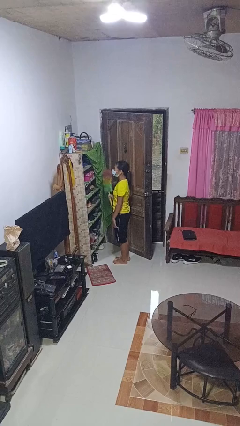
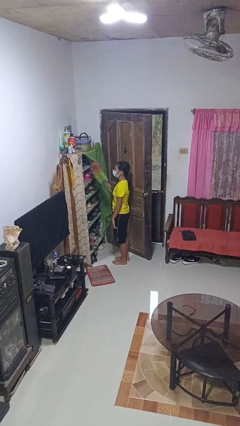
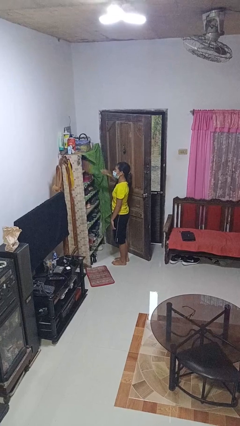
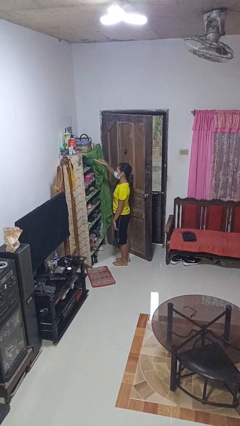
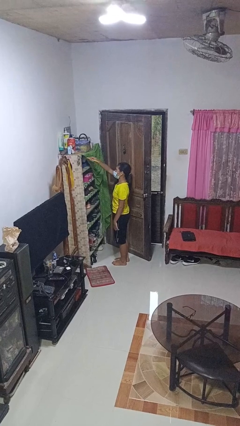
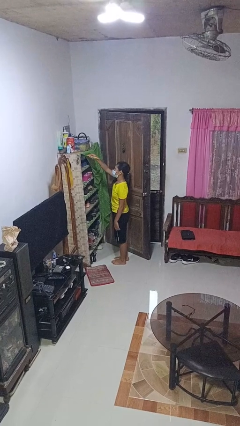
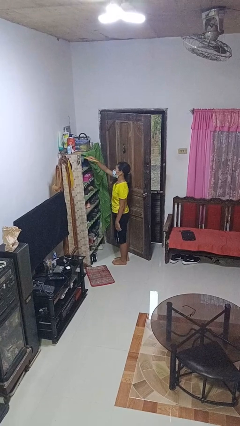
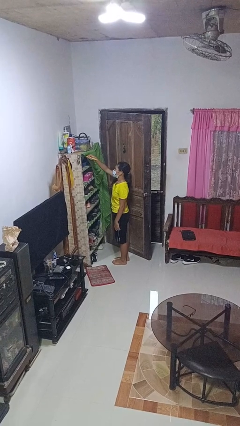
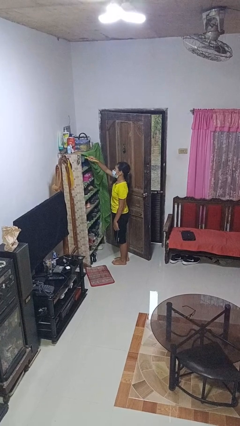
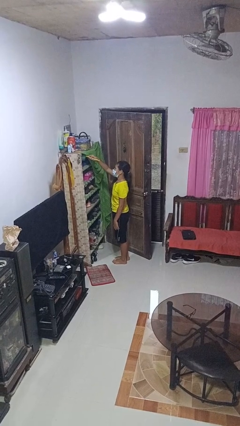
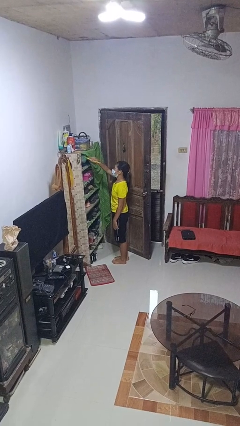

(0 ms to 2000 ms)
person dusts furniture

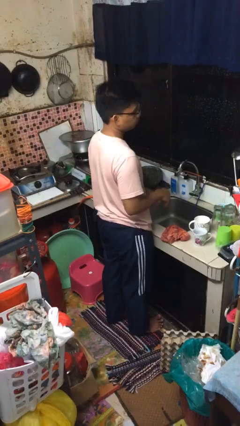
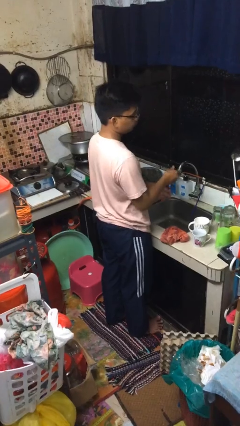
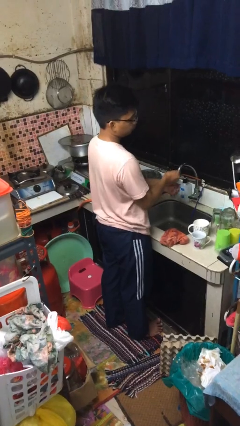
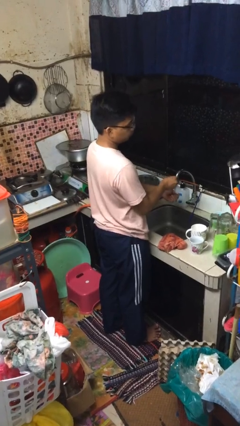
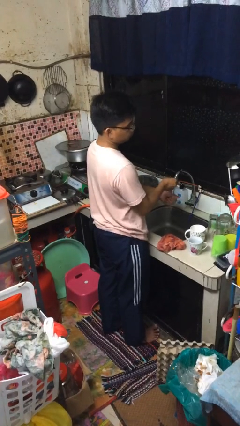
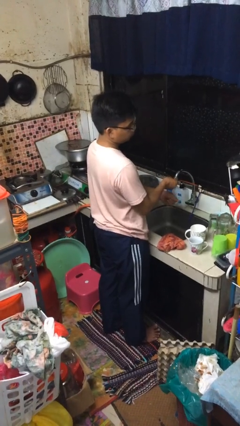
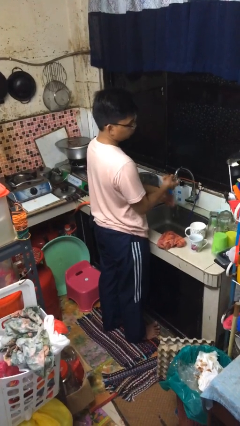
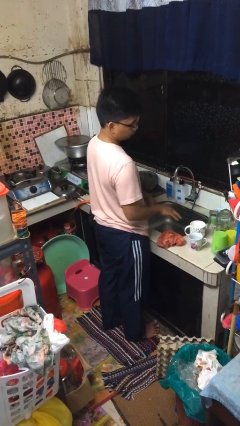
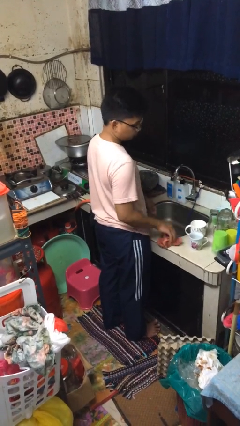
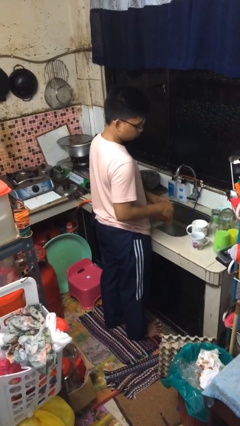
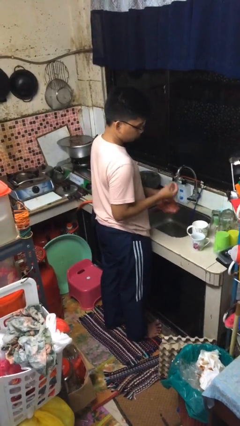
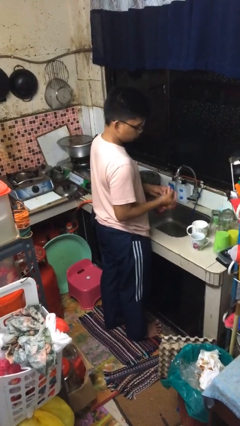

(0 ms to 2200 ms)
person washes hands

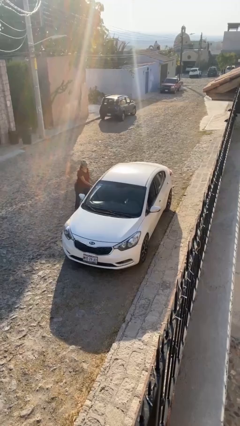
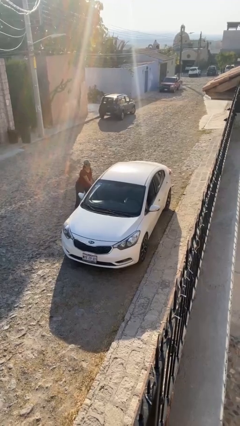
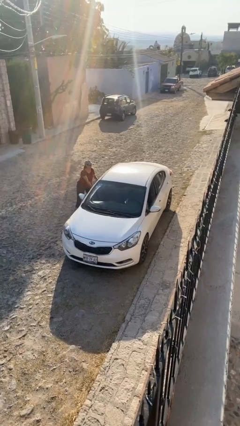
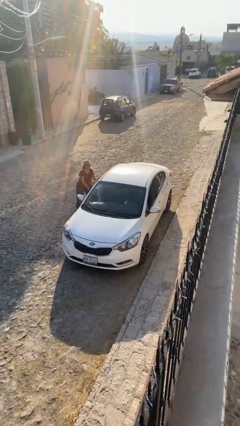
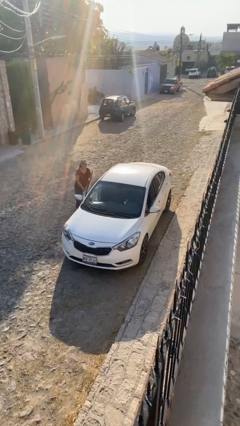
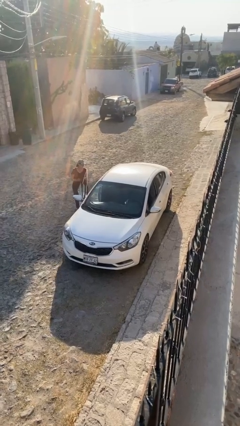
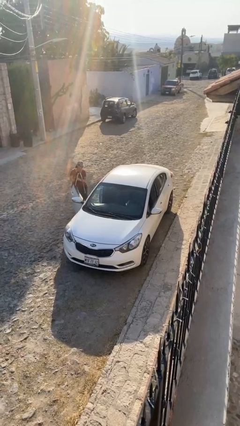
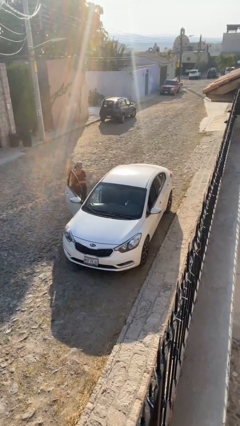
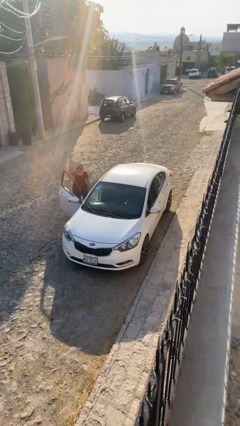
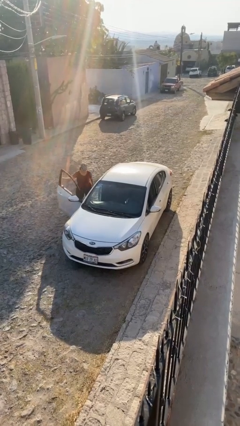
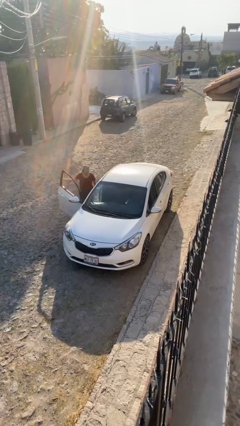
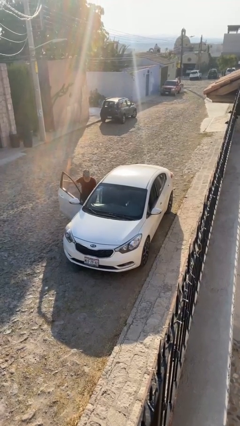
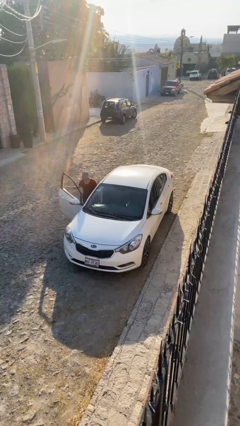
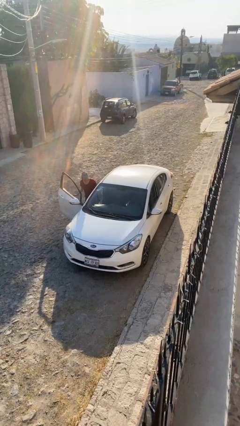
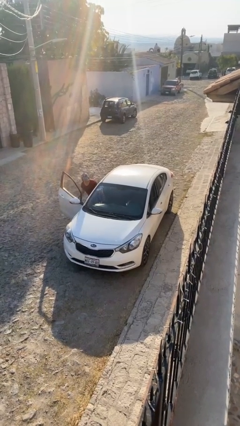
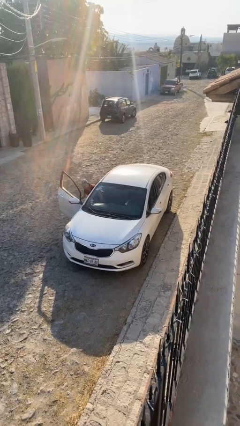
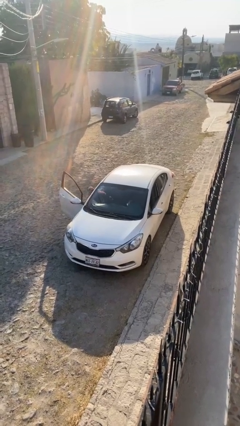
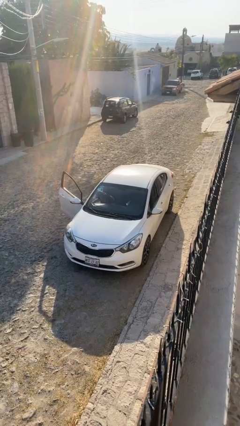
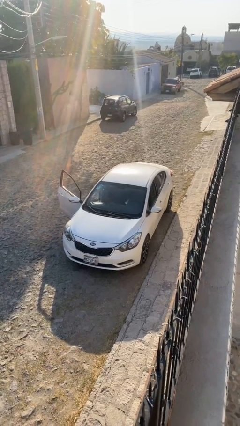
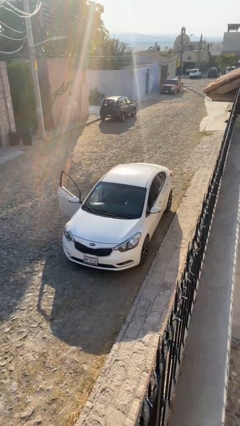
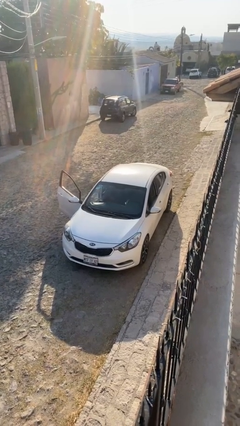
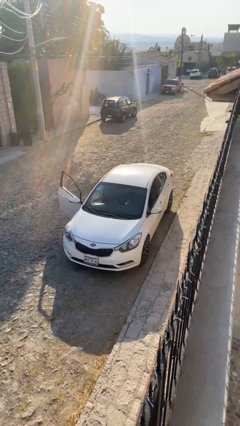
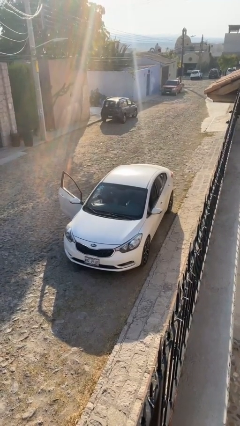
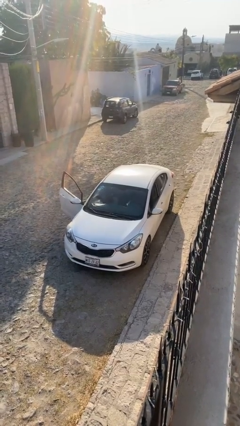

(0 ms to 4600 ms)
car picks up person

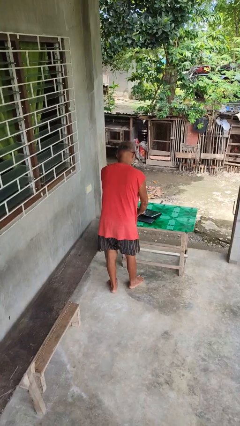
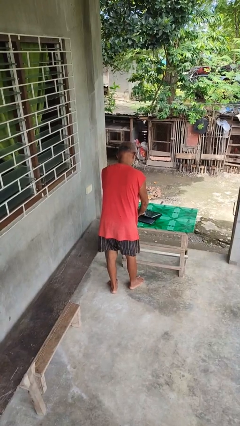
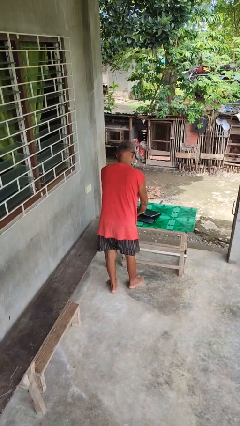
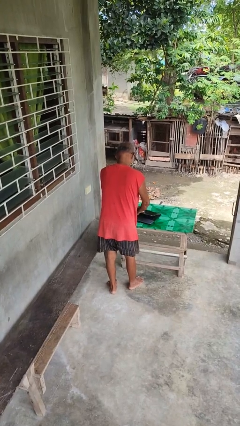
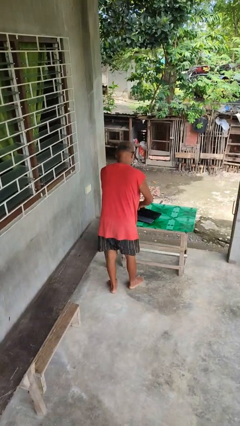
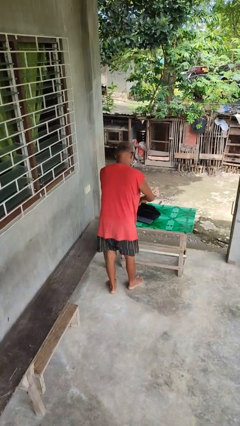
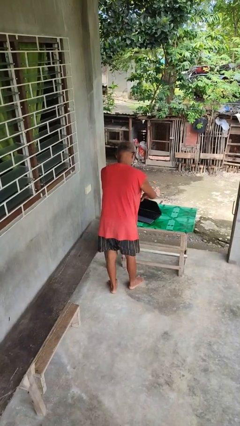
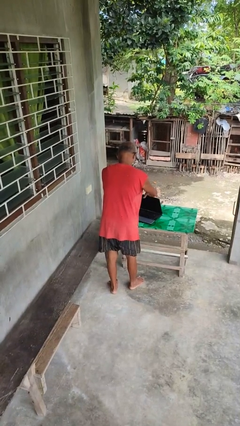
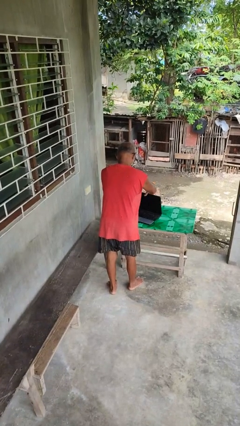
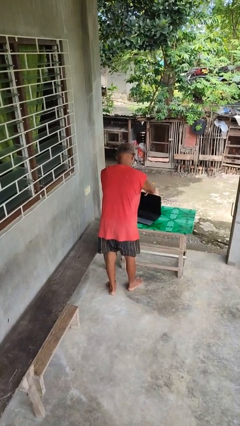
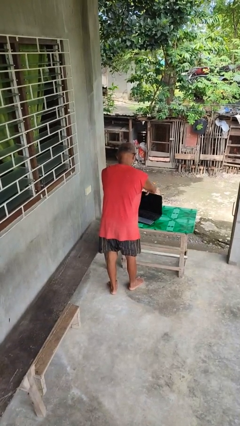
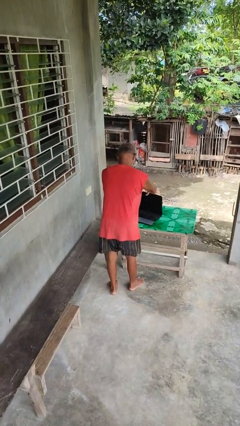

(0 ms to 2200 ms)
person opens laptop

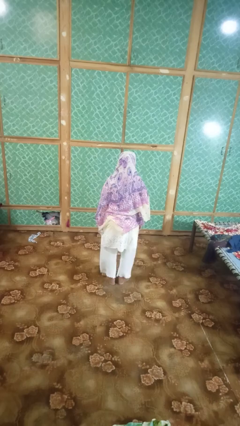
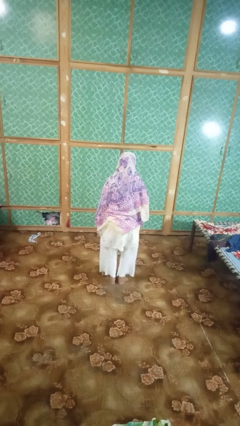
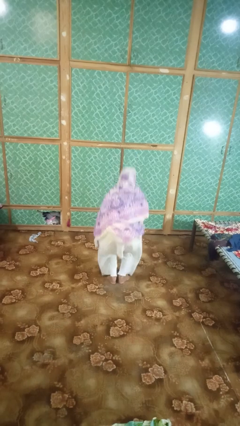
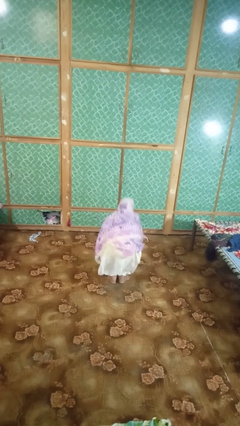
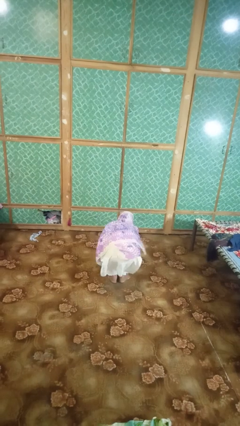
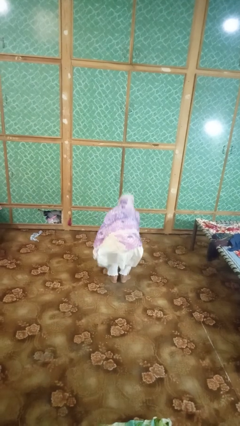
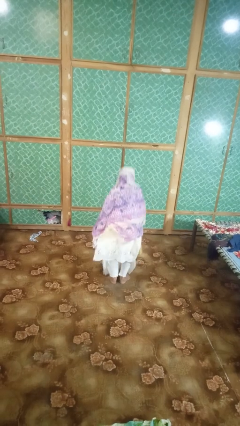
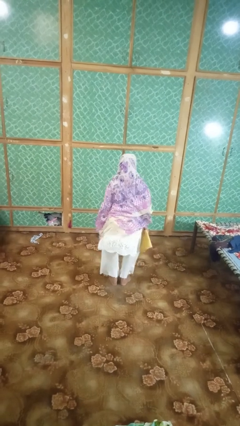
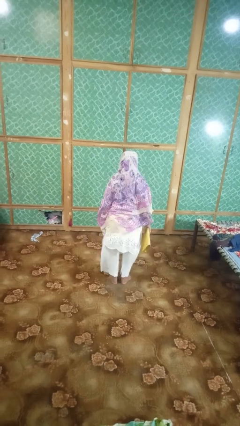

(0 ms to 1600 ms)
person picks up object from floor

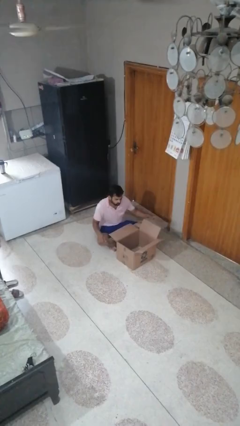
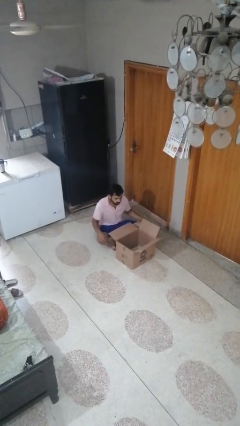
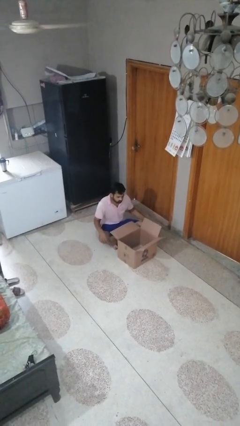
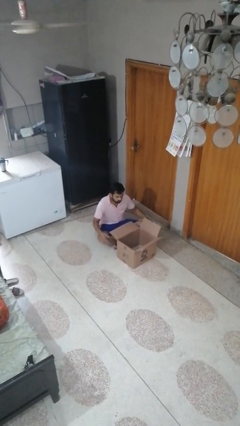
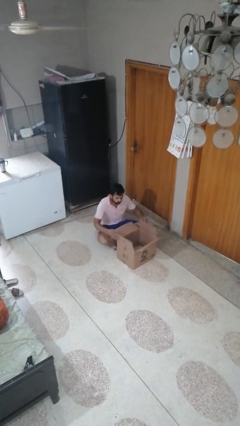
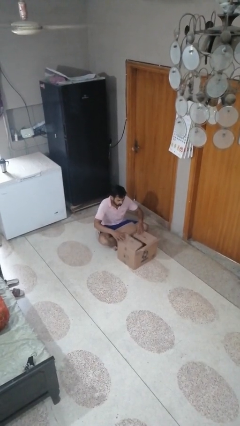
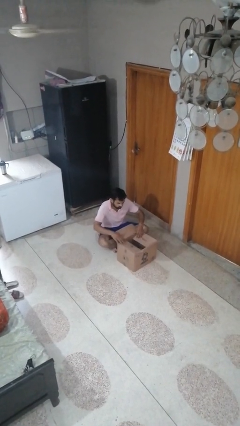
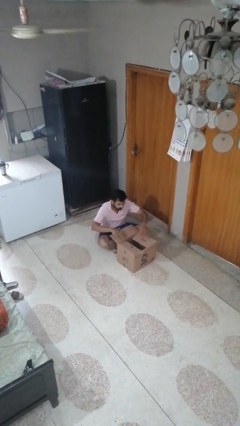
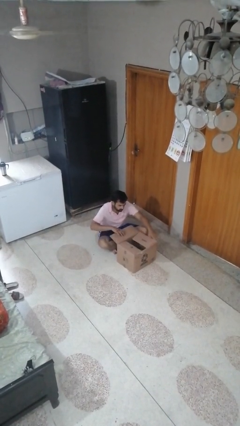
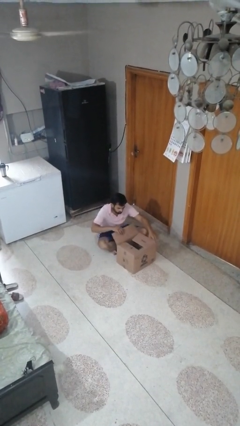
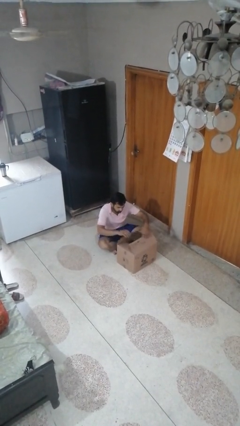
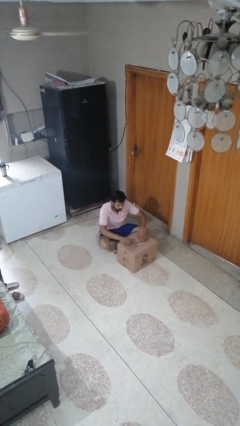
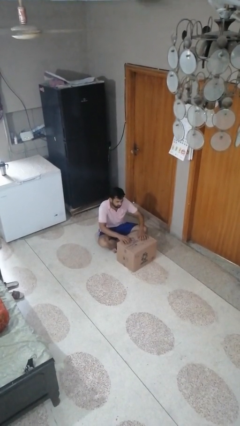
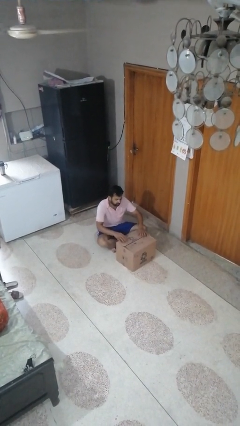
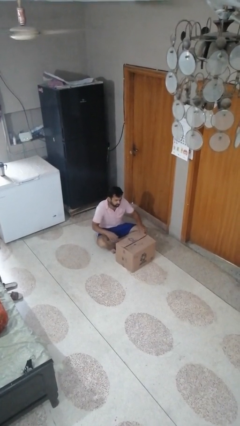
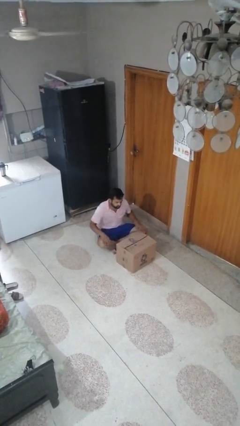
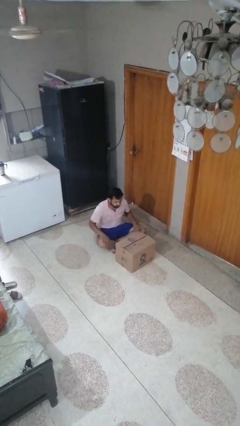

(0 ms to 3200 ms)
person closes box

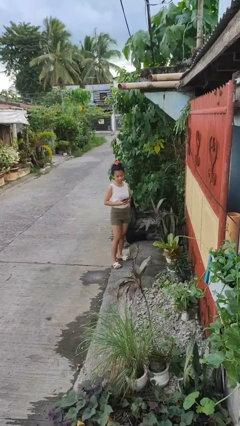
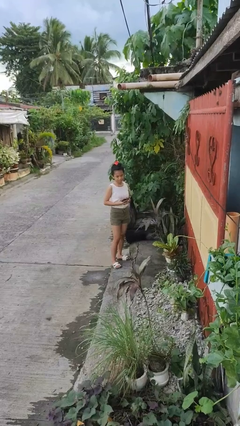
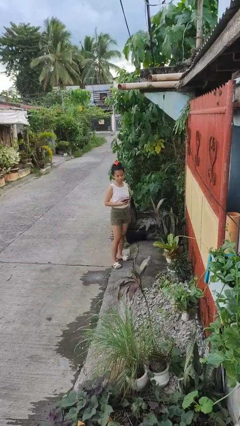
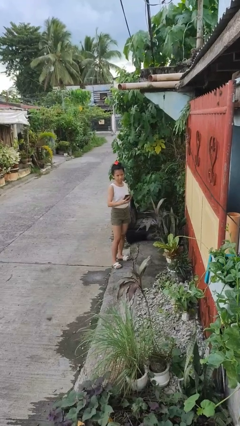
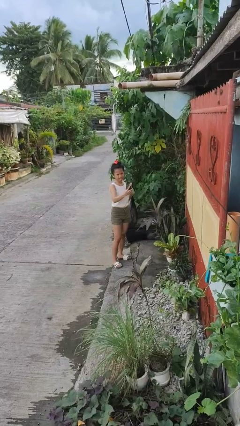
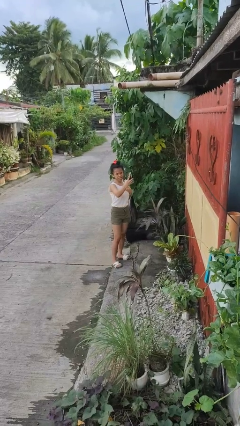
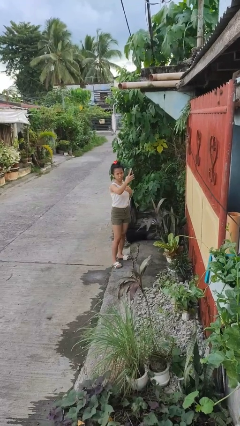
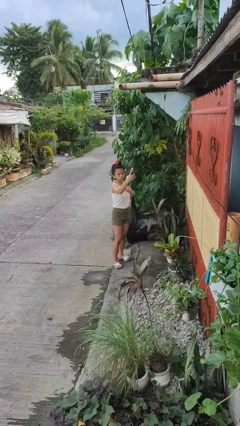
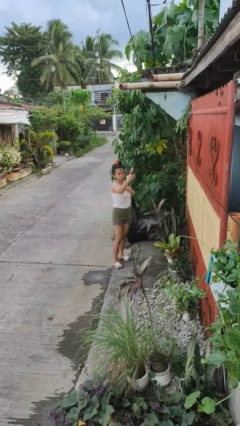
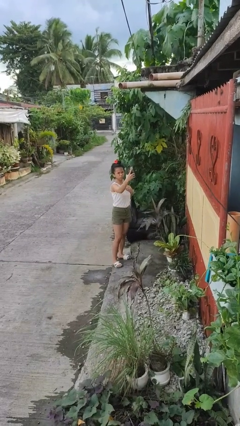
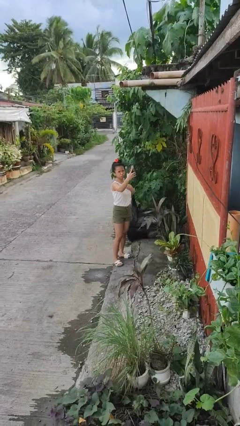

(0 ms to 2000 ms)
person takes selfie
